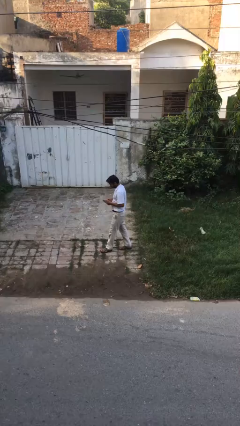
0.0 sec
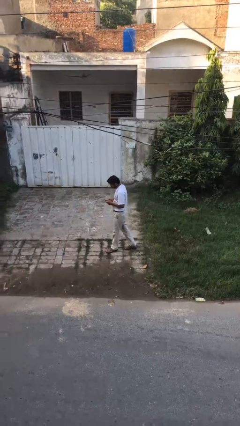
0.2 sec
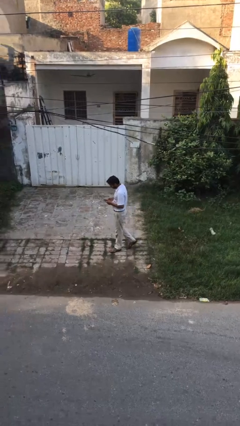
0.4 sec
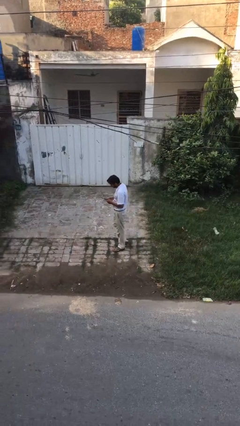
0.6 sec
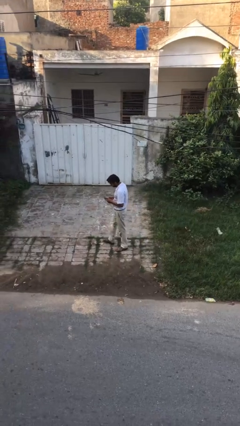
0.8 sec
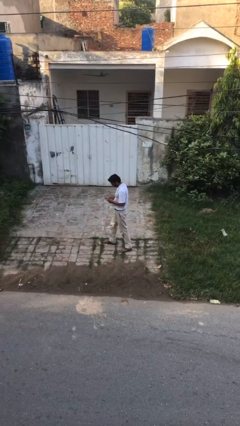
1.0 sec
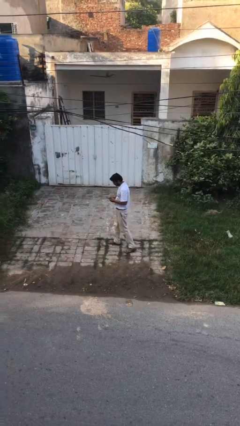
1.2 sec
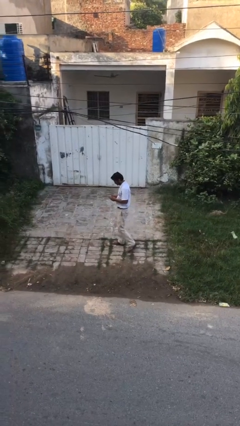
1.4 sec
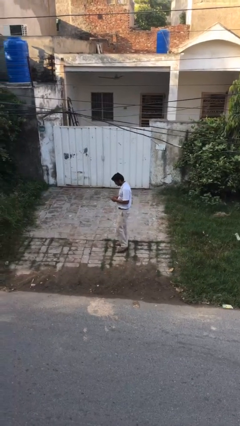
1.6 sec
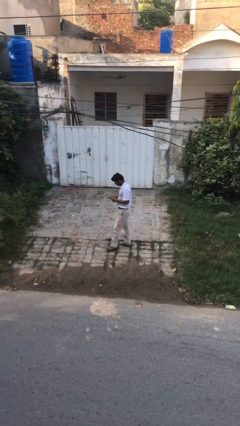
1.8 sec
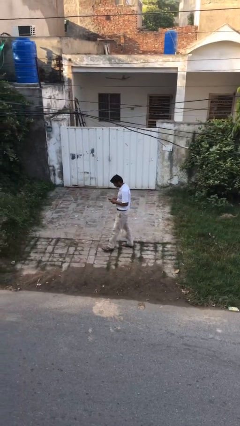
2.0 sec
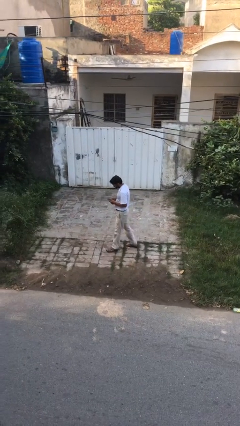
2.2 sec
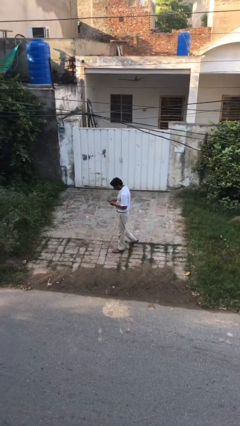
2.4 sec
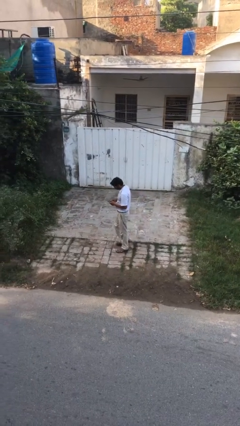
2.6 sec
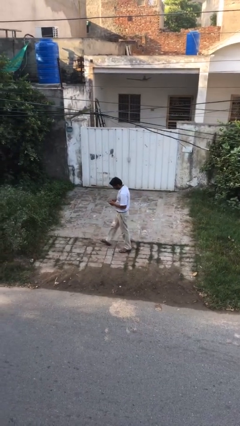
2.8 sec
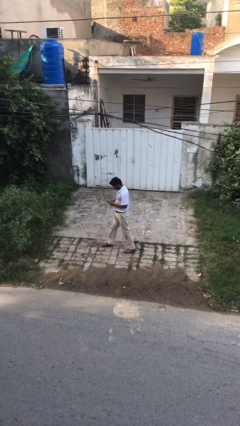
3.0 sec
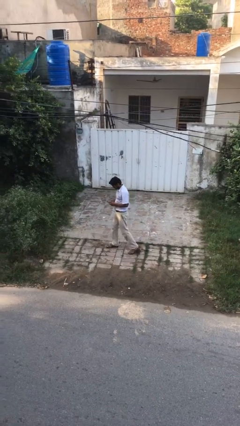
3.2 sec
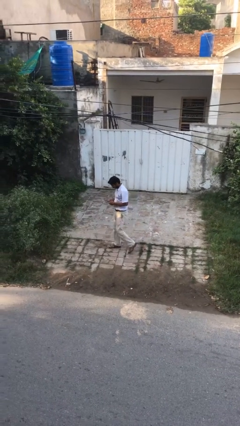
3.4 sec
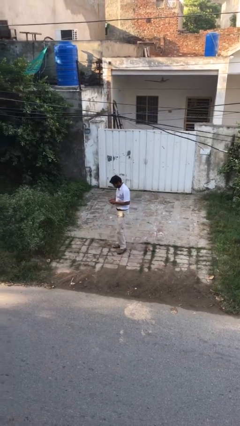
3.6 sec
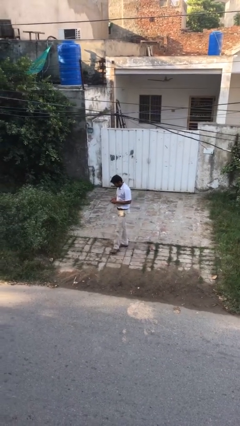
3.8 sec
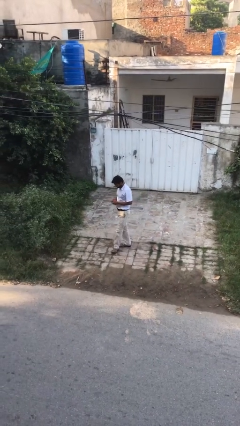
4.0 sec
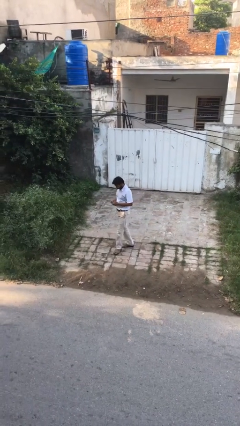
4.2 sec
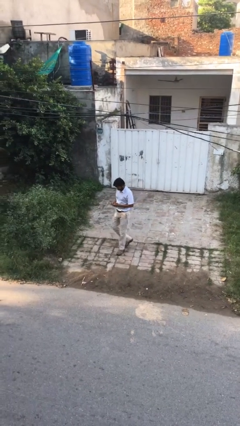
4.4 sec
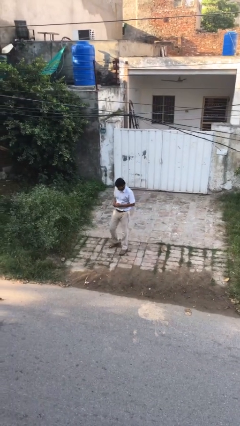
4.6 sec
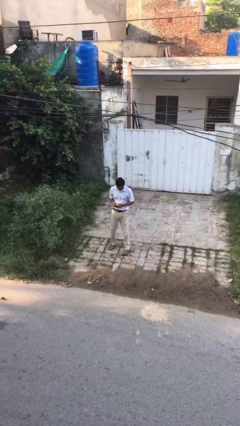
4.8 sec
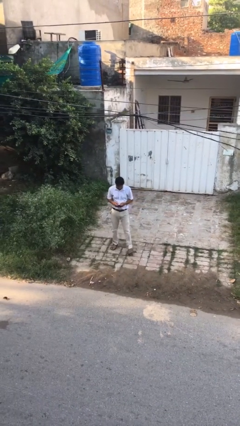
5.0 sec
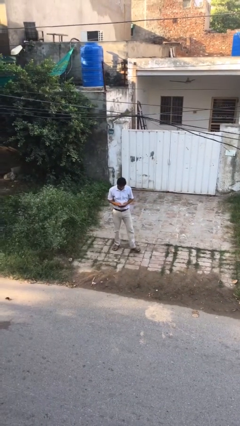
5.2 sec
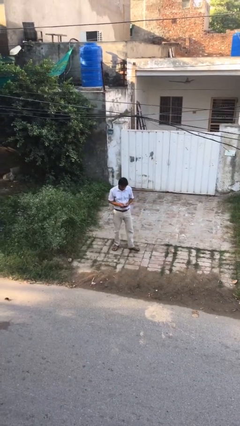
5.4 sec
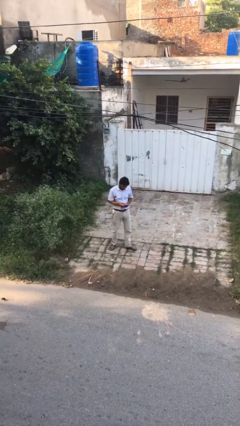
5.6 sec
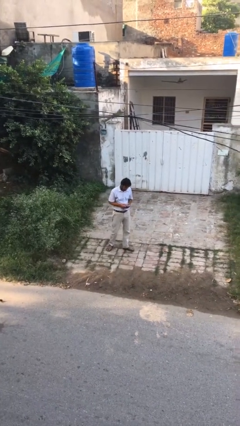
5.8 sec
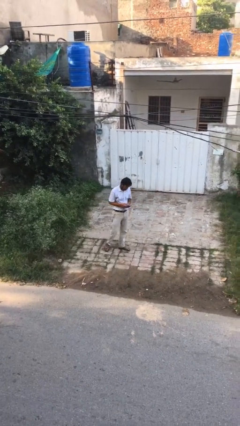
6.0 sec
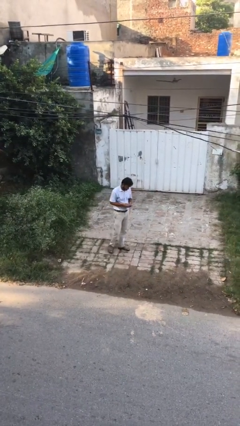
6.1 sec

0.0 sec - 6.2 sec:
person texts on phone

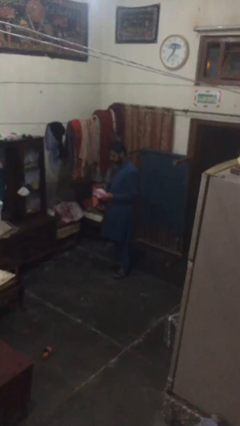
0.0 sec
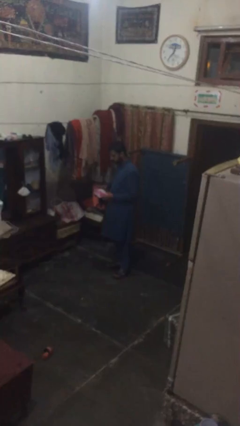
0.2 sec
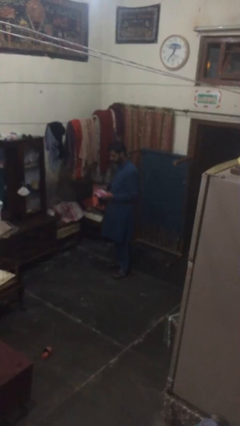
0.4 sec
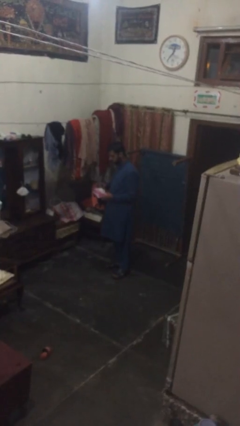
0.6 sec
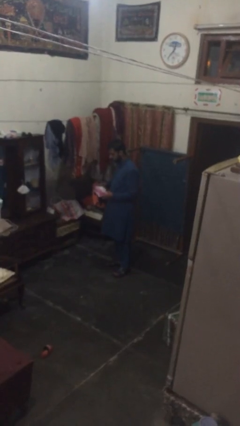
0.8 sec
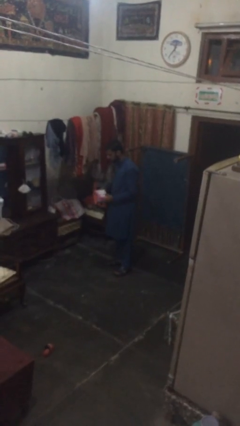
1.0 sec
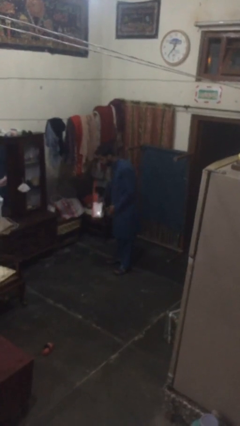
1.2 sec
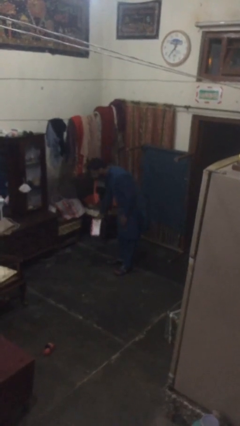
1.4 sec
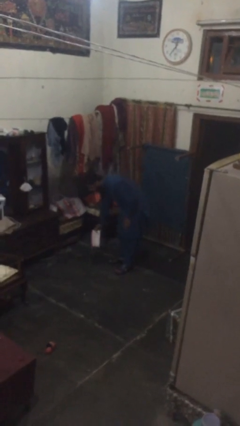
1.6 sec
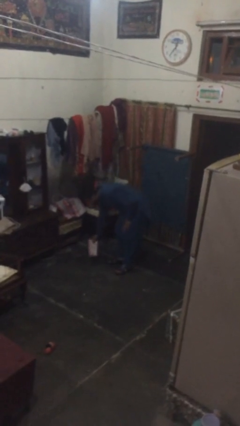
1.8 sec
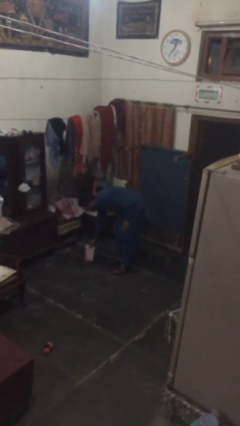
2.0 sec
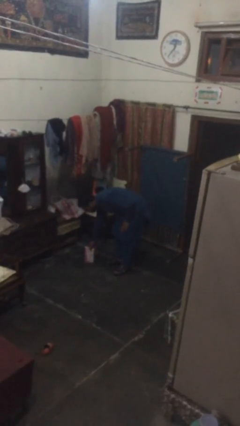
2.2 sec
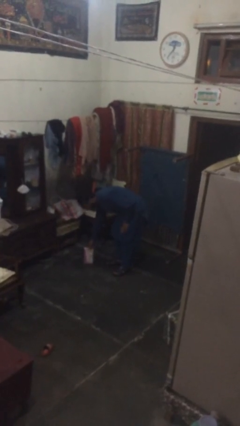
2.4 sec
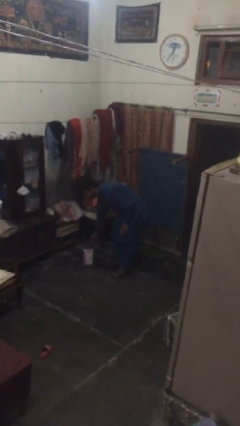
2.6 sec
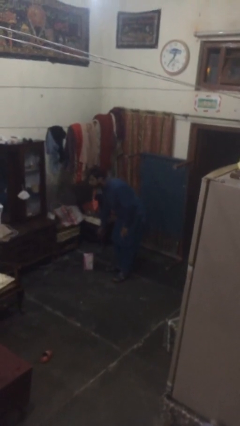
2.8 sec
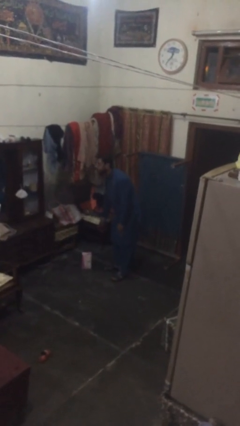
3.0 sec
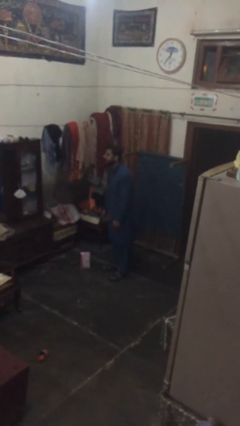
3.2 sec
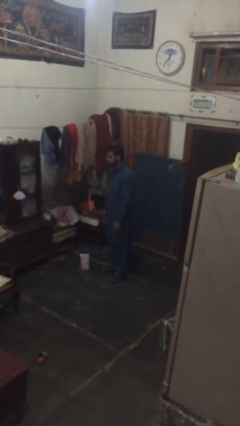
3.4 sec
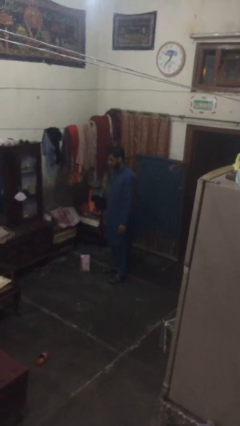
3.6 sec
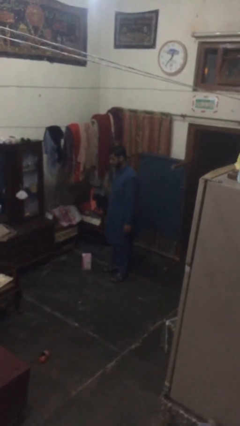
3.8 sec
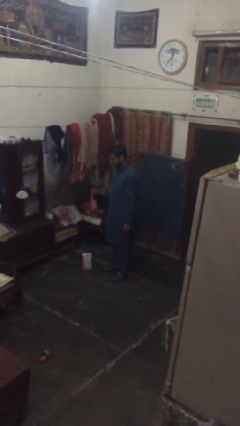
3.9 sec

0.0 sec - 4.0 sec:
person puts down object on floor

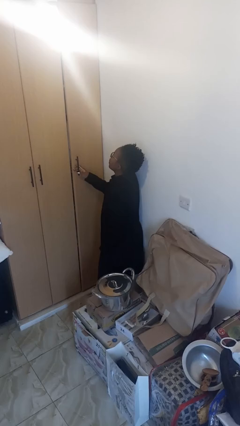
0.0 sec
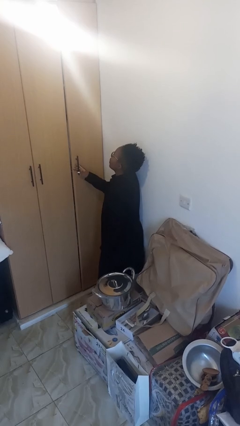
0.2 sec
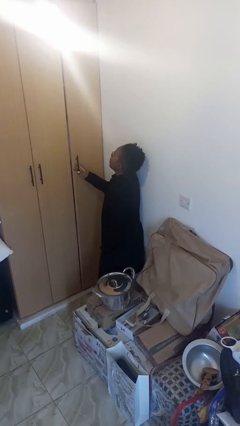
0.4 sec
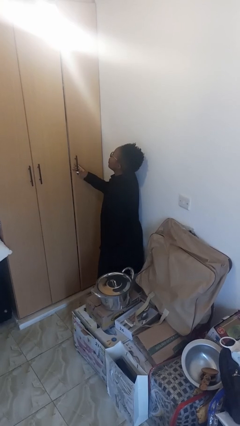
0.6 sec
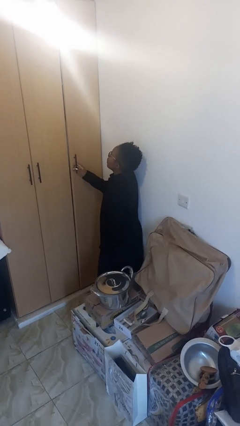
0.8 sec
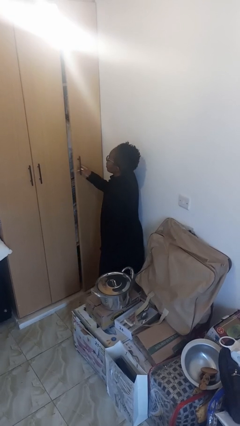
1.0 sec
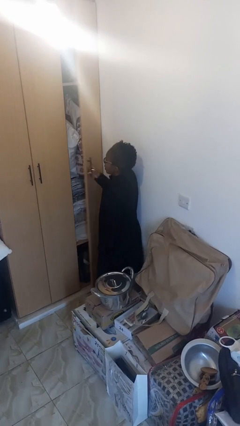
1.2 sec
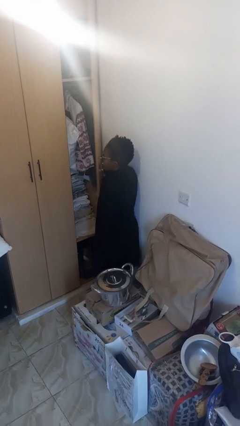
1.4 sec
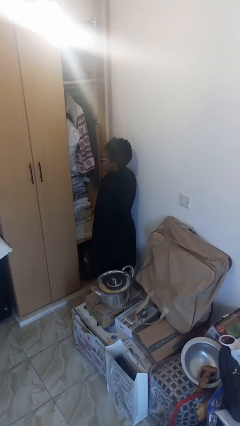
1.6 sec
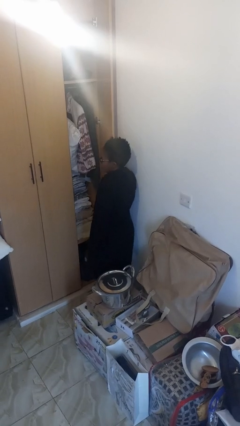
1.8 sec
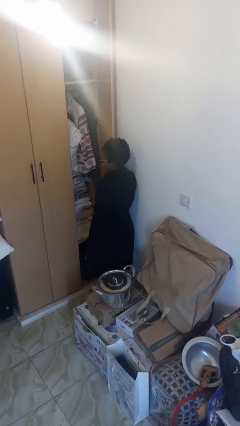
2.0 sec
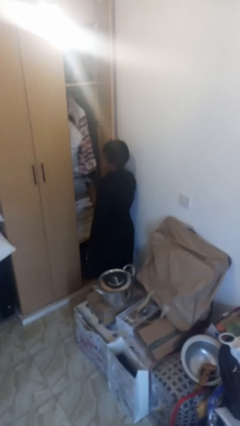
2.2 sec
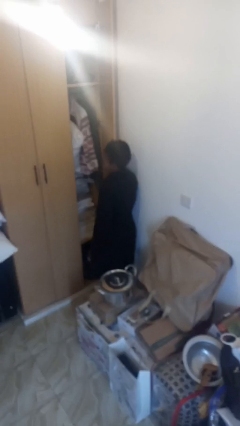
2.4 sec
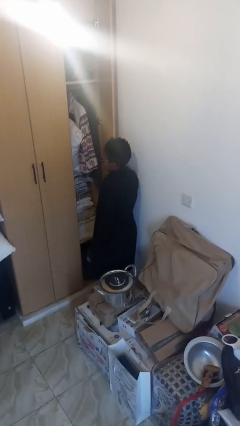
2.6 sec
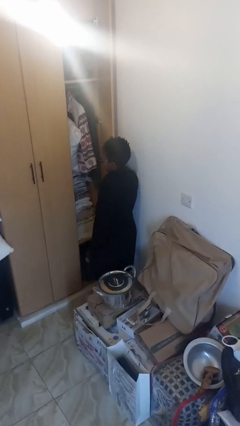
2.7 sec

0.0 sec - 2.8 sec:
person opens closet door

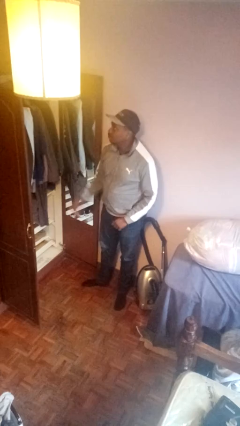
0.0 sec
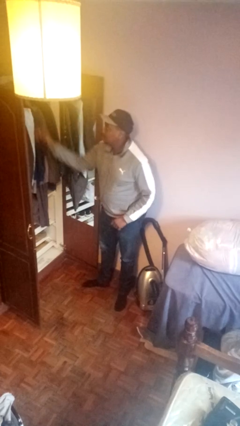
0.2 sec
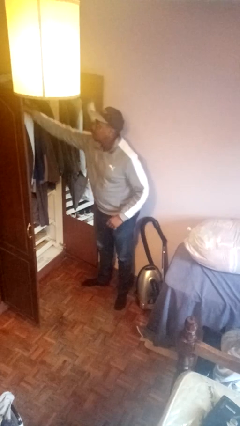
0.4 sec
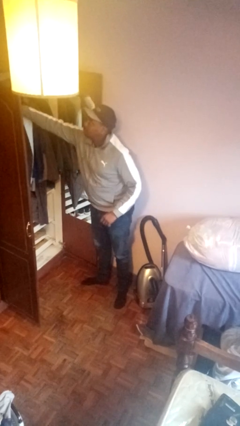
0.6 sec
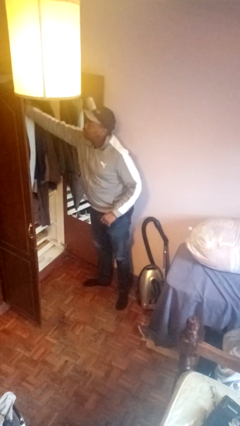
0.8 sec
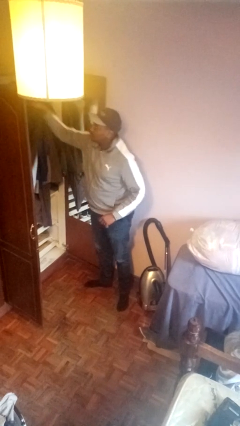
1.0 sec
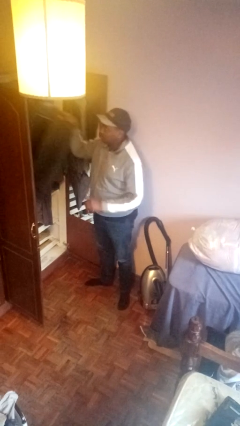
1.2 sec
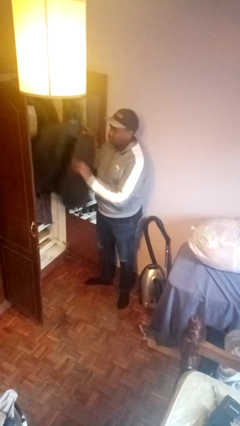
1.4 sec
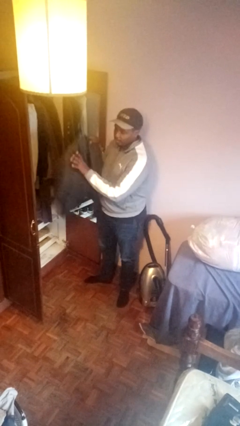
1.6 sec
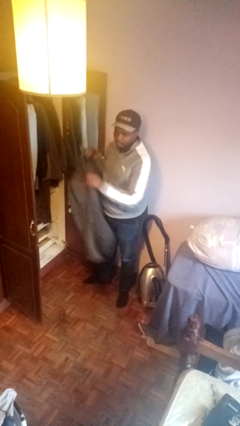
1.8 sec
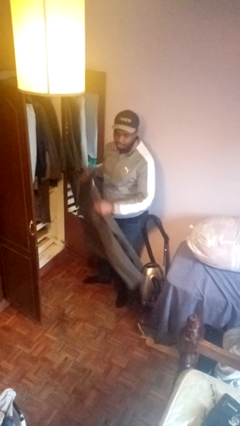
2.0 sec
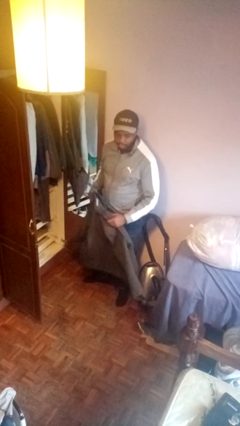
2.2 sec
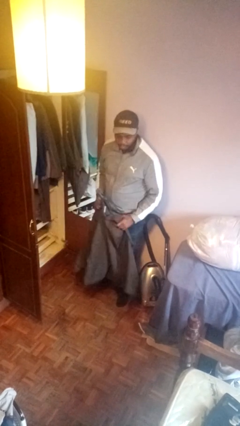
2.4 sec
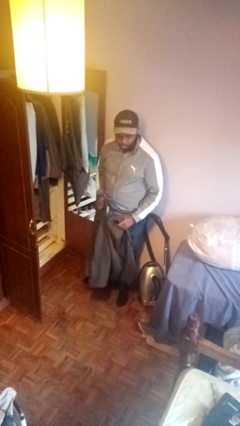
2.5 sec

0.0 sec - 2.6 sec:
person takes clothes from closet

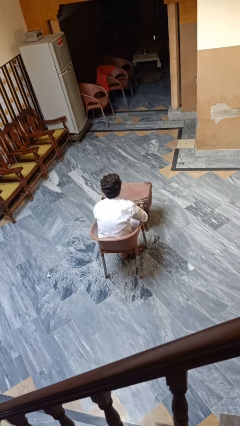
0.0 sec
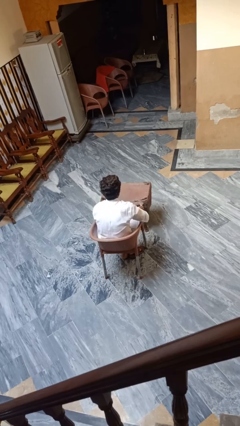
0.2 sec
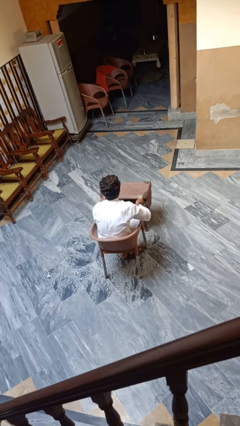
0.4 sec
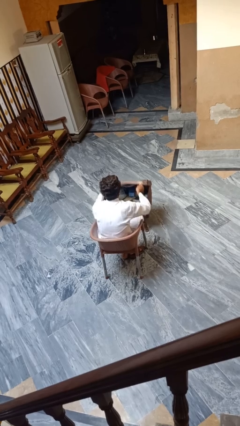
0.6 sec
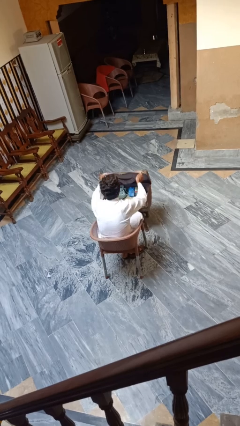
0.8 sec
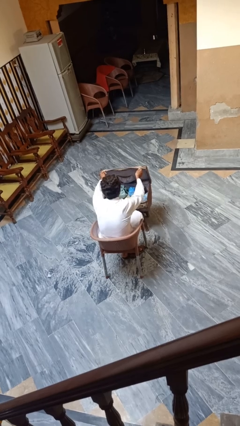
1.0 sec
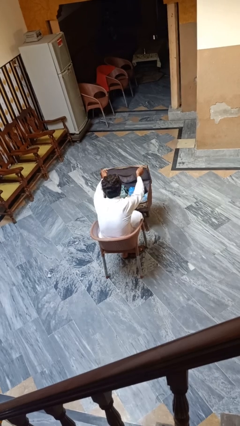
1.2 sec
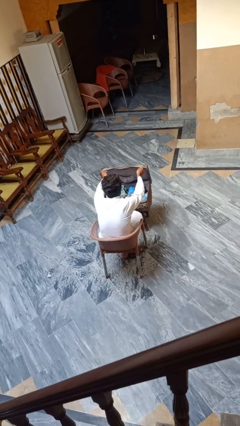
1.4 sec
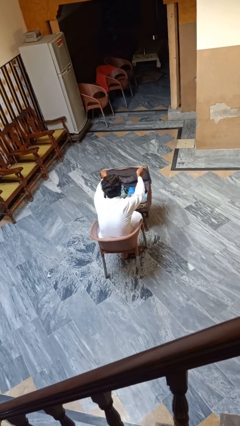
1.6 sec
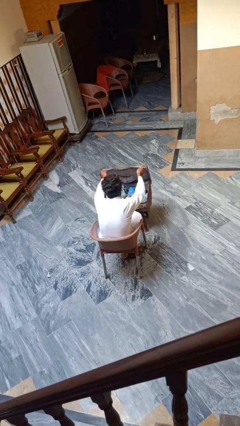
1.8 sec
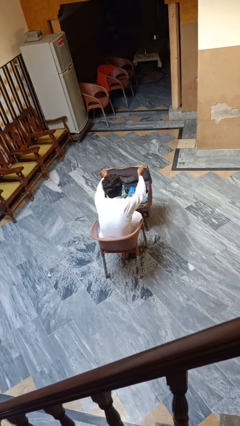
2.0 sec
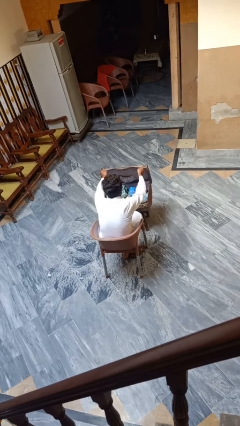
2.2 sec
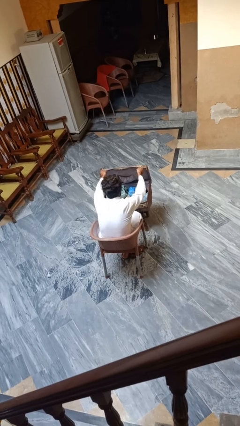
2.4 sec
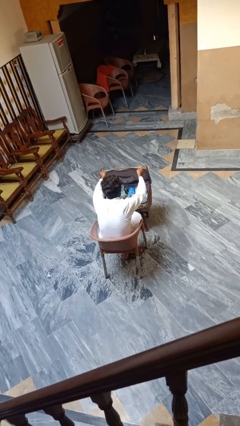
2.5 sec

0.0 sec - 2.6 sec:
person opens suitcase
